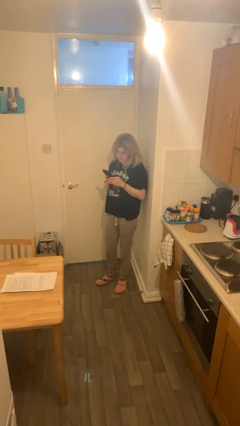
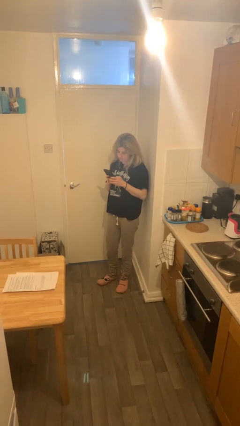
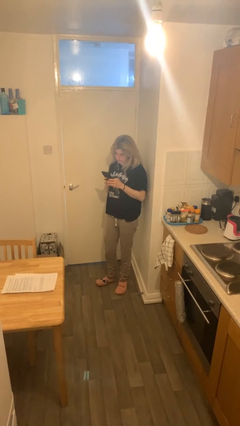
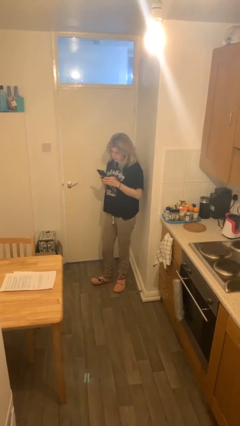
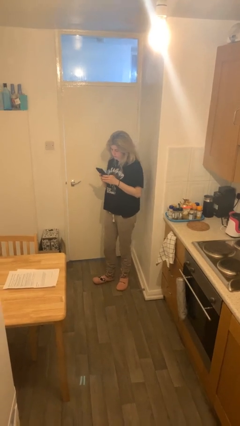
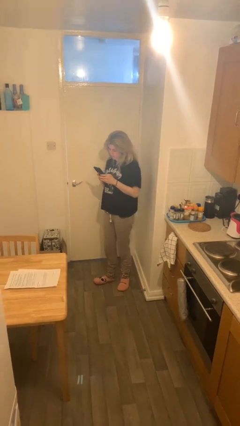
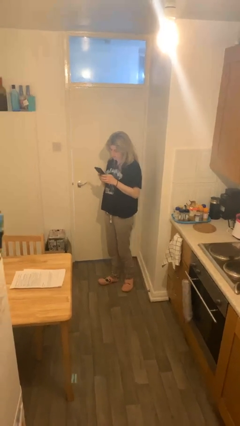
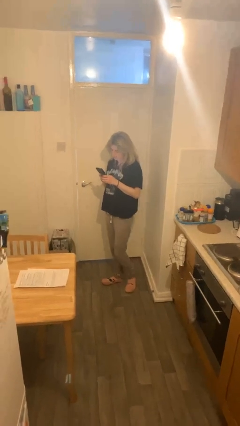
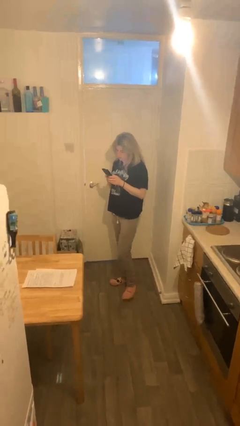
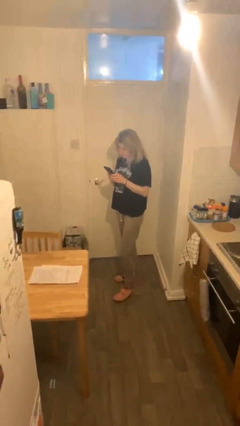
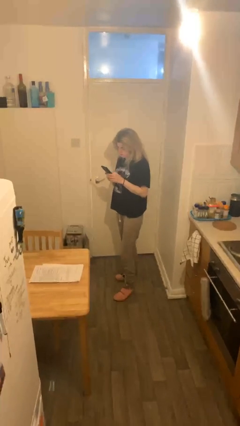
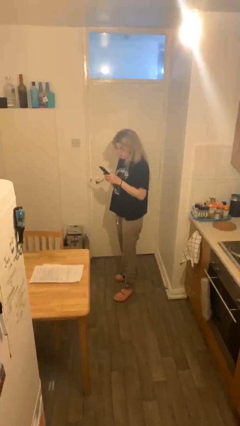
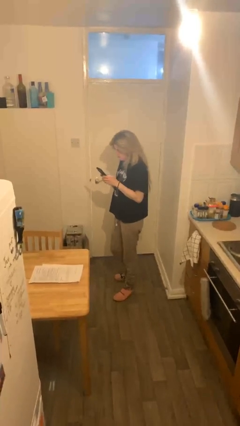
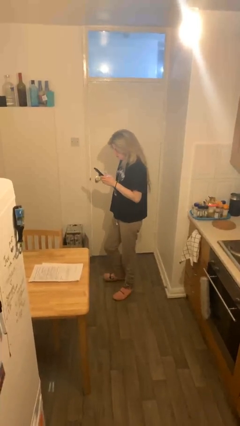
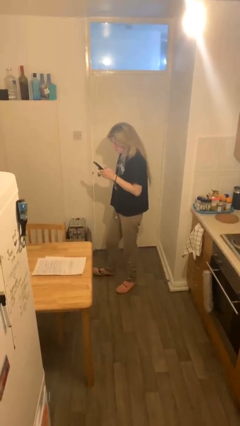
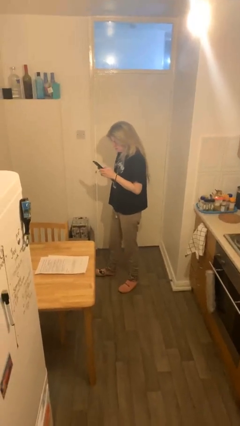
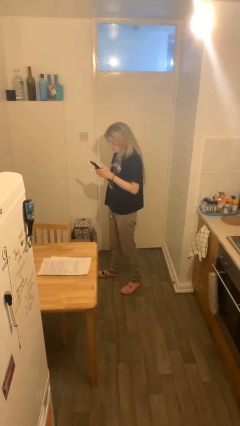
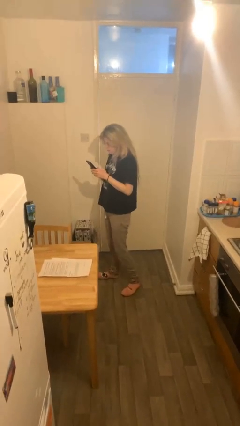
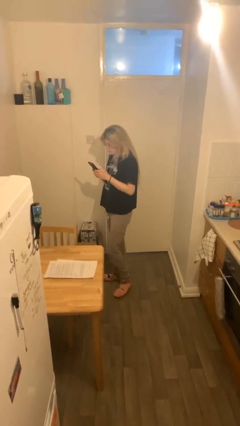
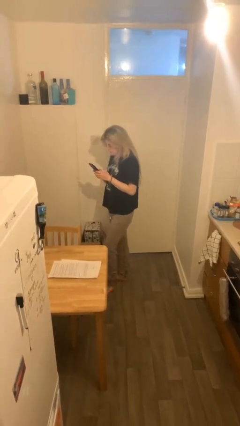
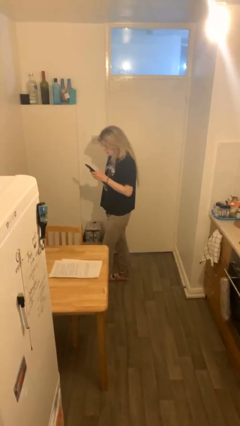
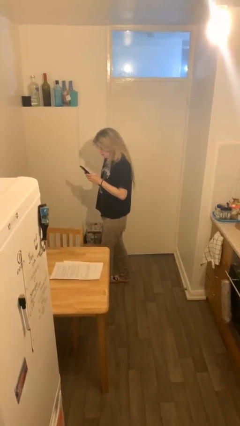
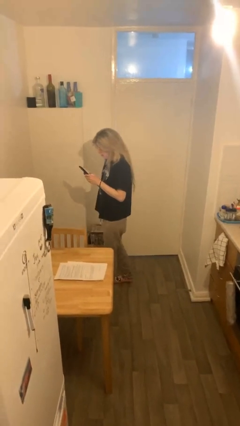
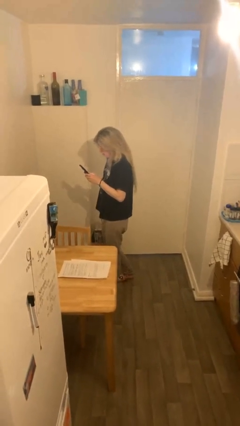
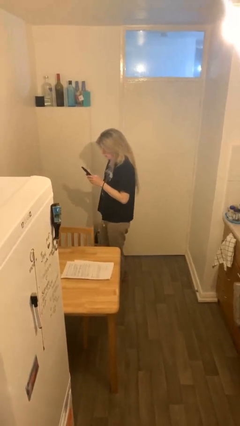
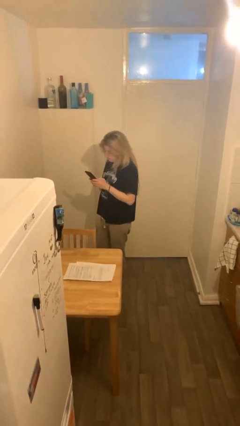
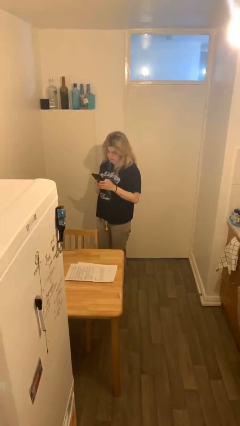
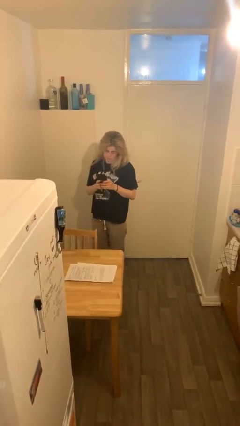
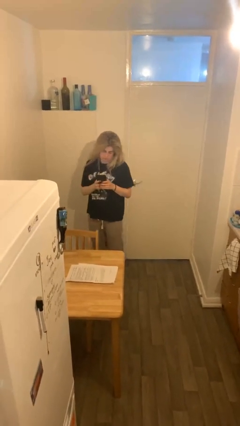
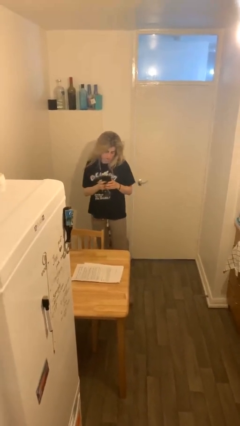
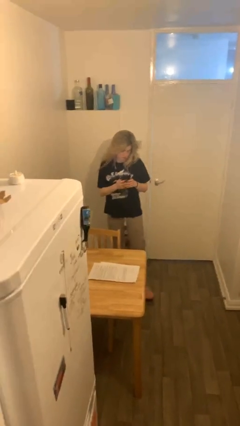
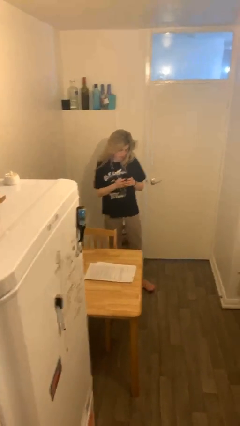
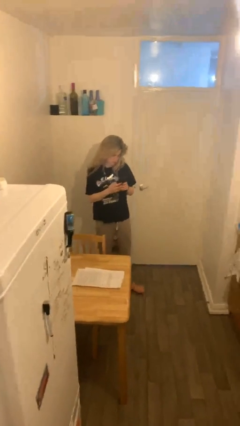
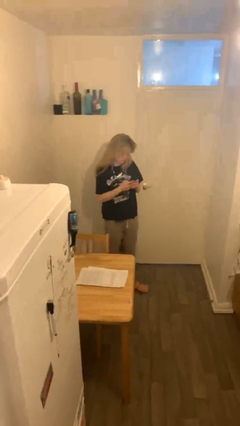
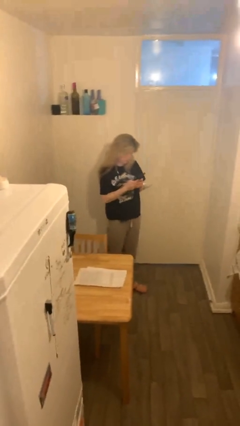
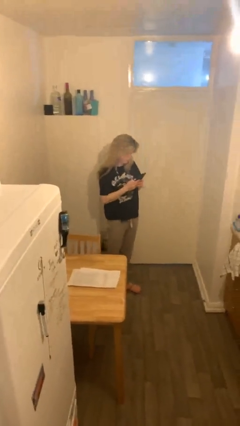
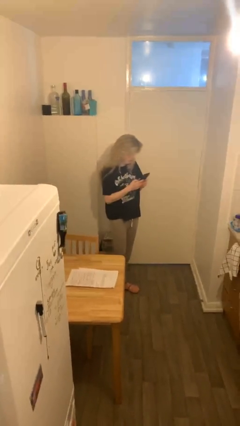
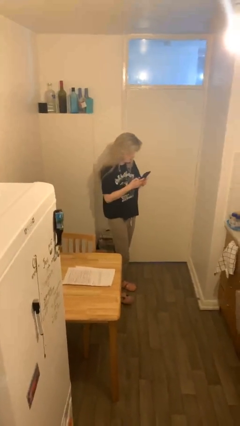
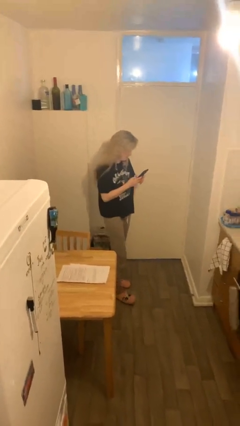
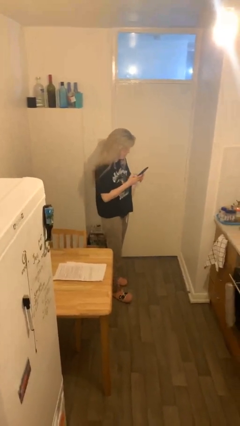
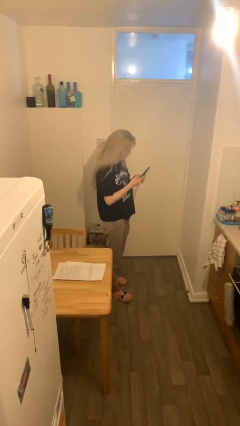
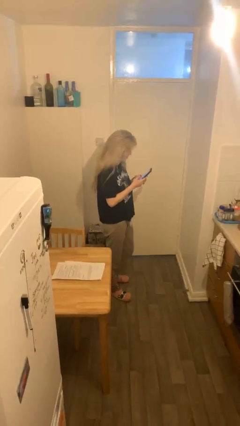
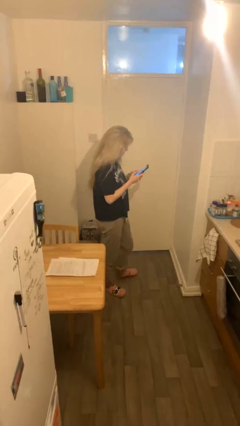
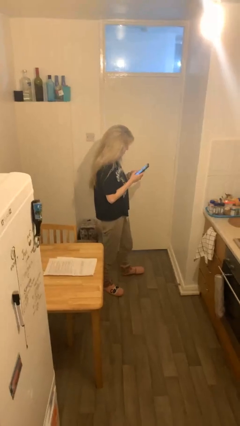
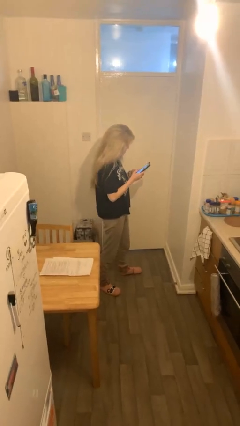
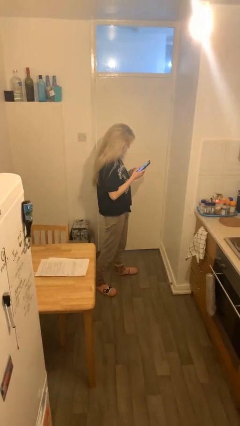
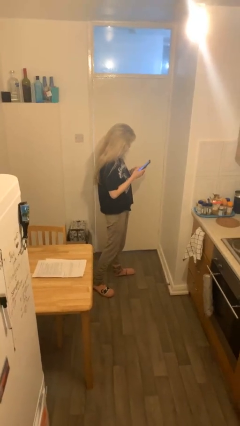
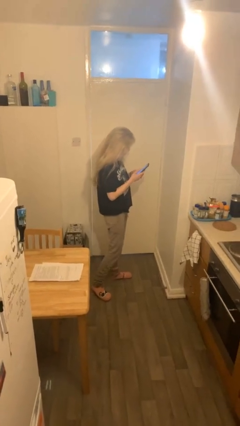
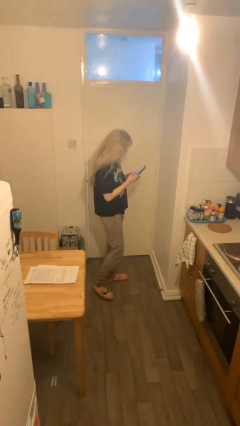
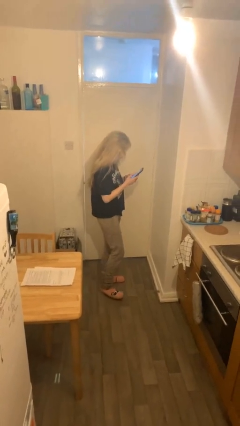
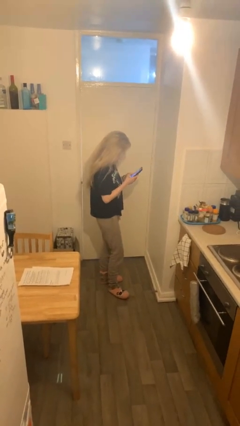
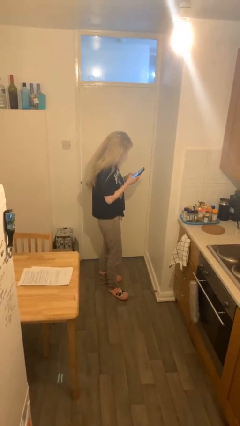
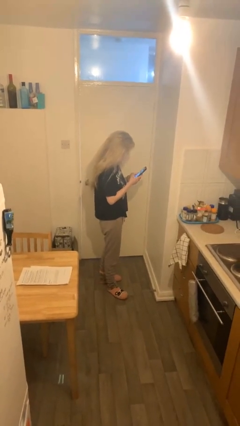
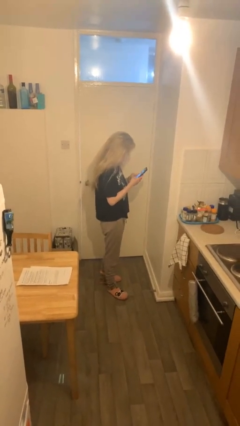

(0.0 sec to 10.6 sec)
person texts on phone

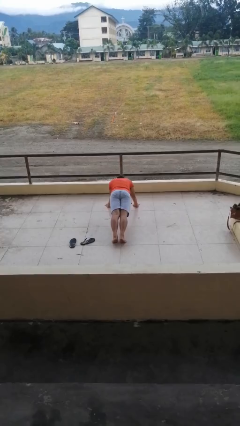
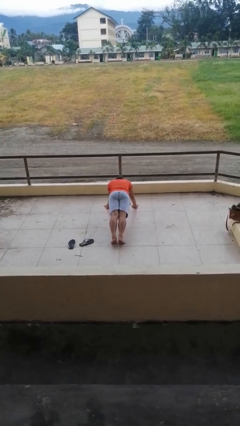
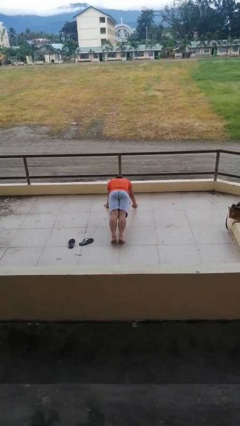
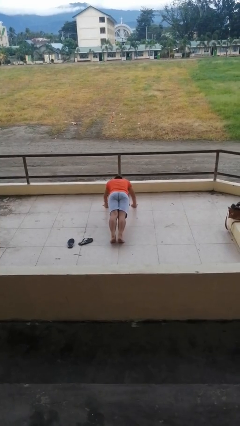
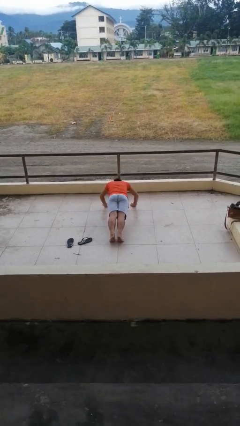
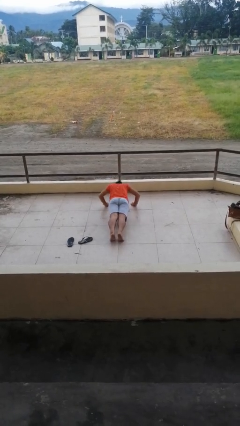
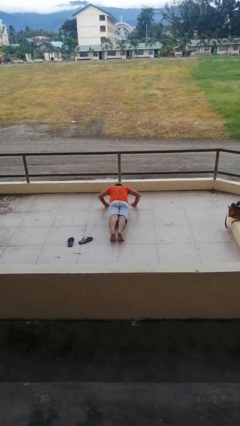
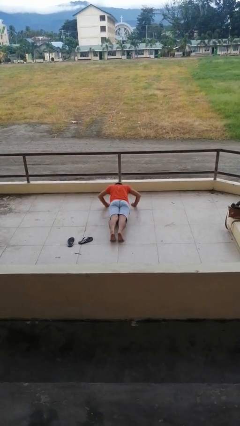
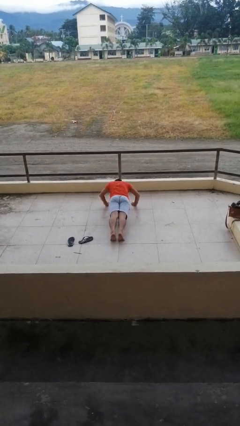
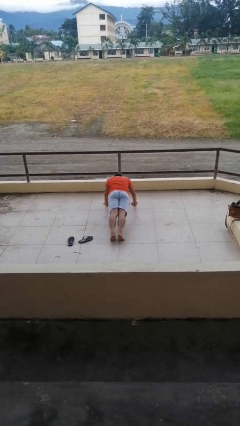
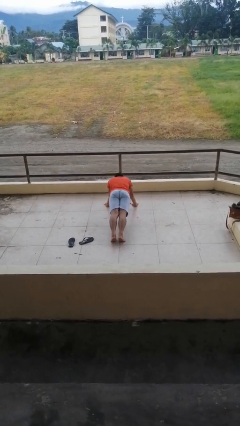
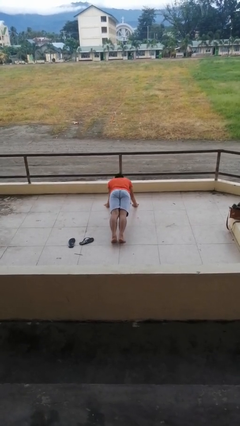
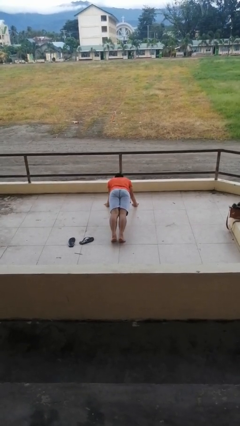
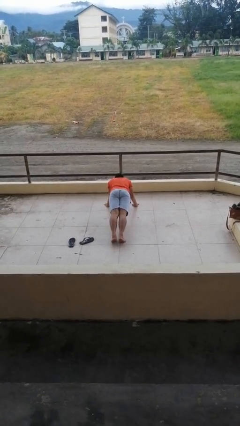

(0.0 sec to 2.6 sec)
person exercises with pushup

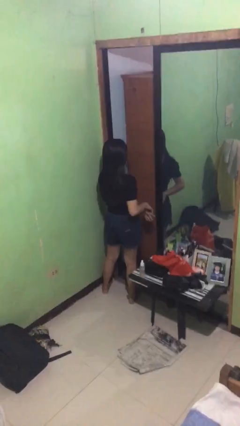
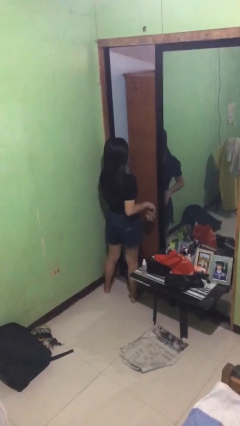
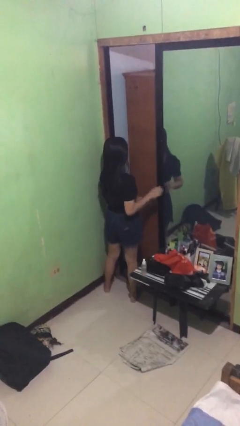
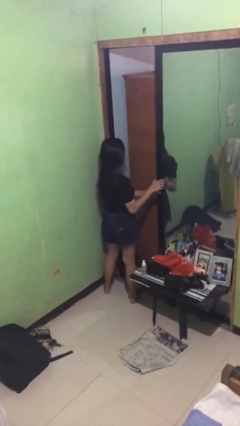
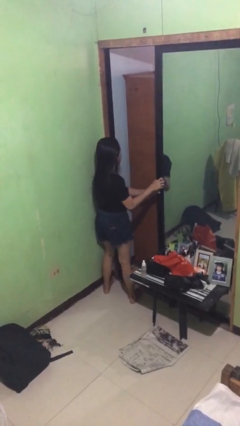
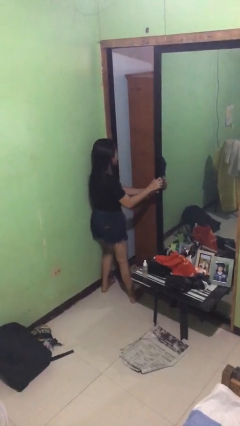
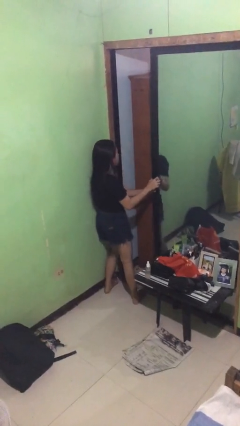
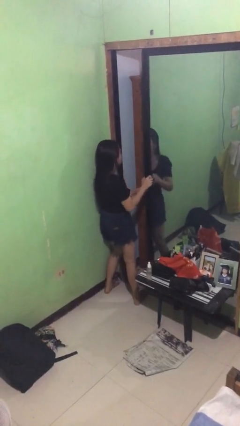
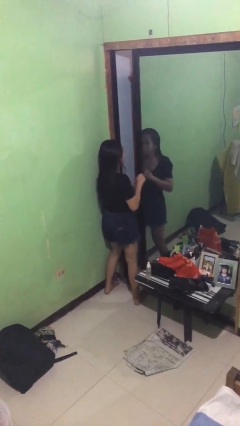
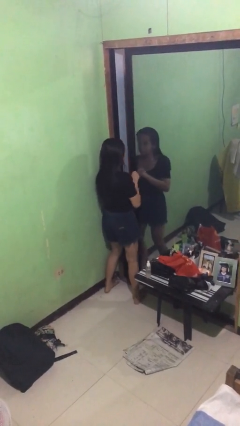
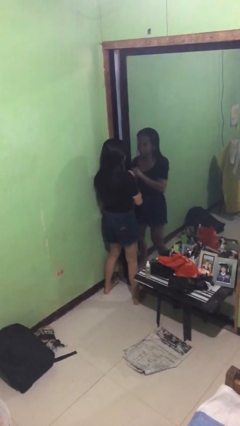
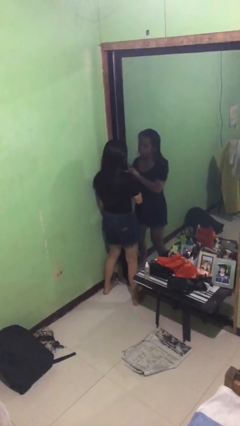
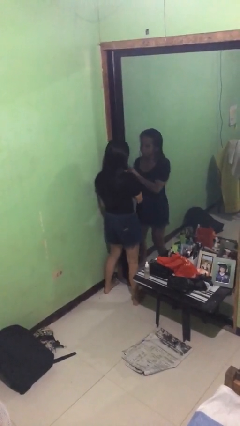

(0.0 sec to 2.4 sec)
person closes sliding door

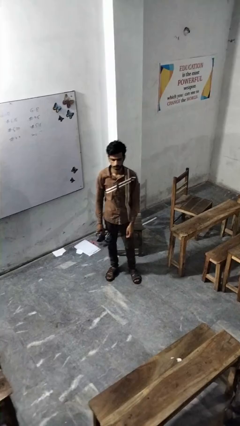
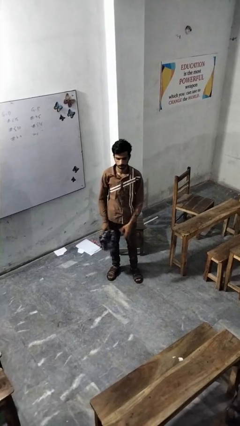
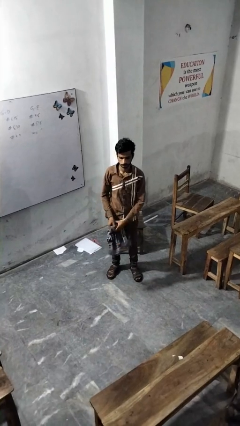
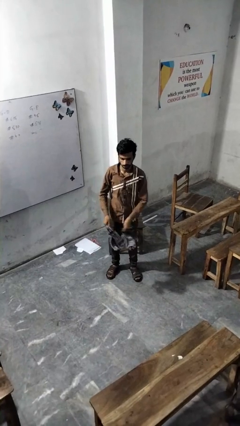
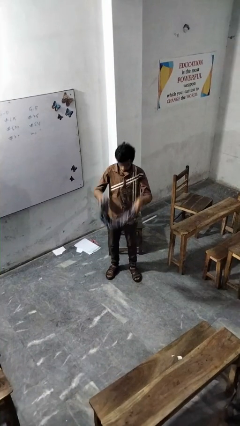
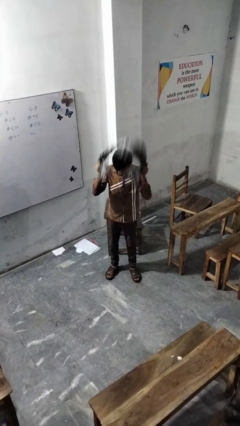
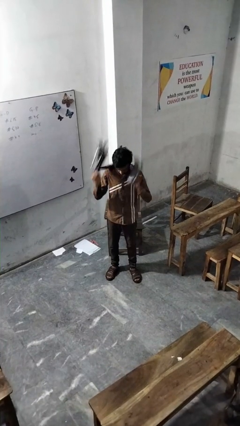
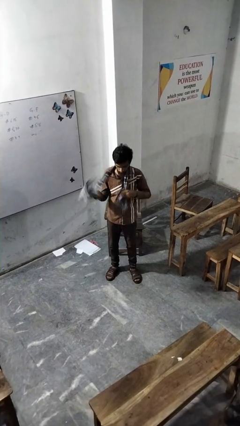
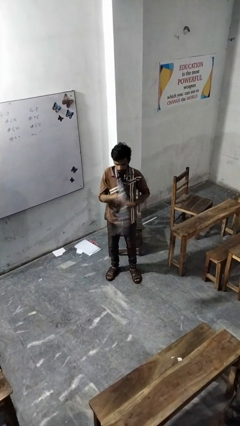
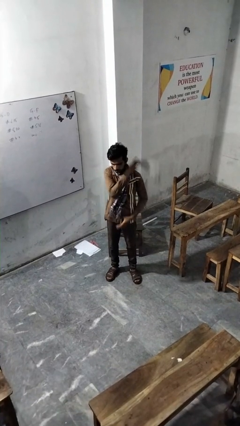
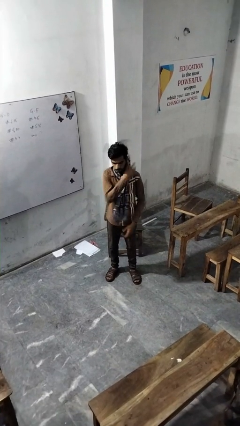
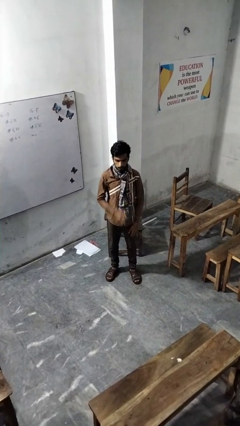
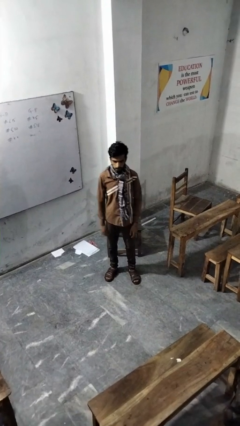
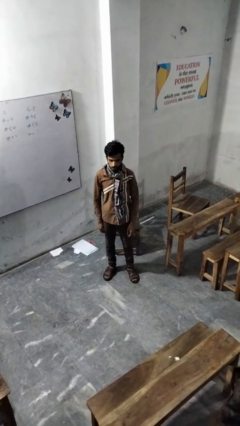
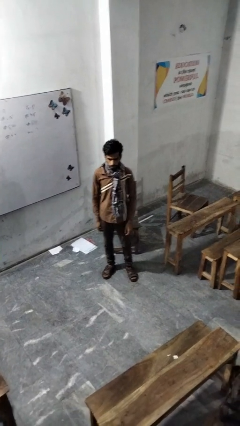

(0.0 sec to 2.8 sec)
person puts on scarf
